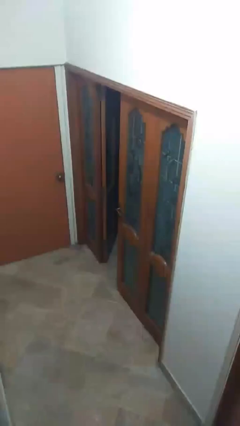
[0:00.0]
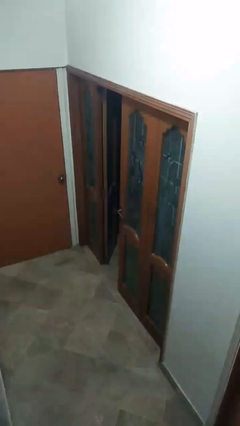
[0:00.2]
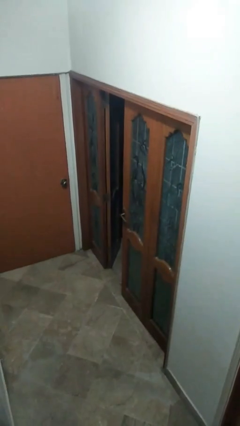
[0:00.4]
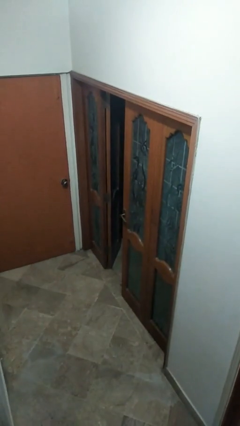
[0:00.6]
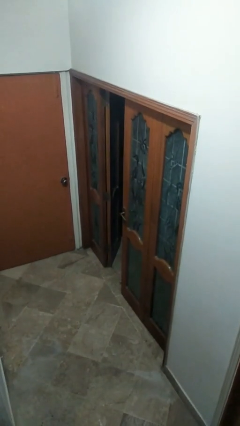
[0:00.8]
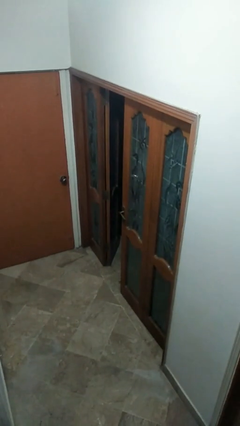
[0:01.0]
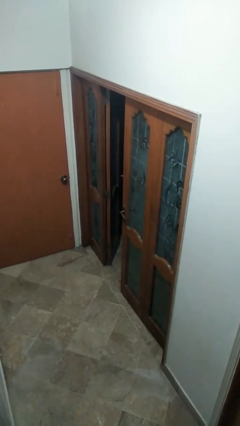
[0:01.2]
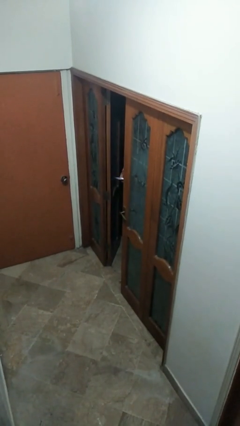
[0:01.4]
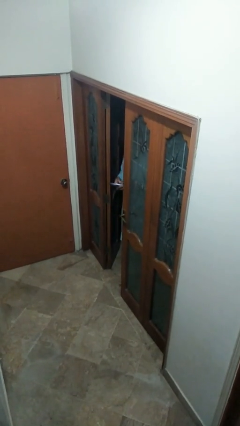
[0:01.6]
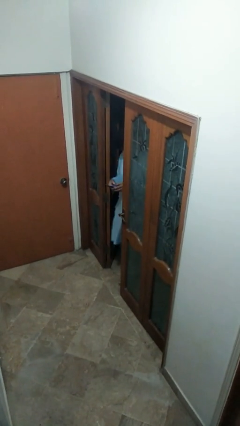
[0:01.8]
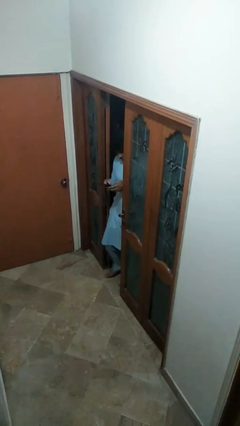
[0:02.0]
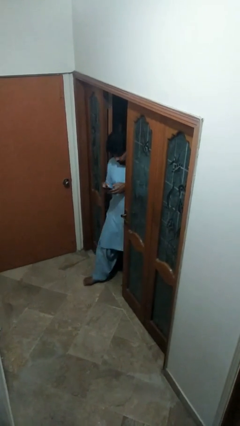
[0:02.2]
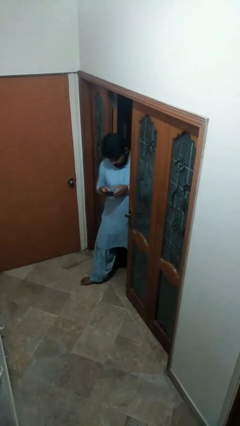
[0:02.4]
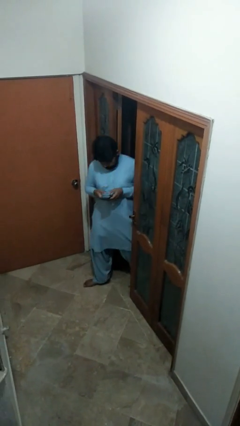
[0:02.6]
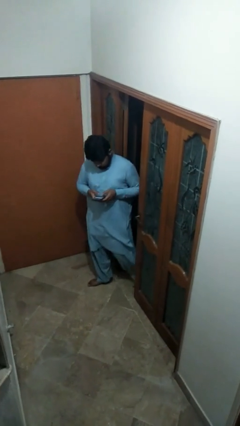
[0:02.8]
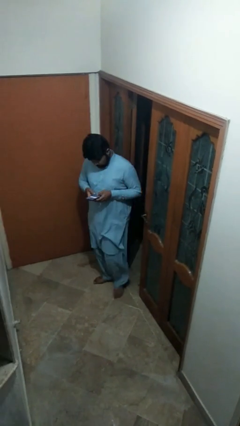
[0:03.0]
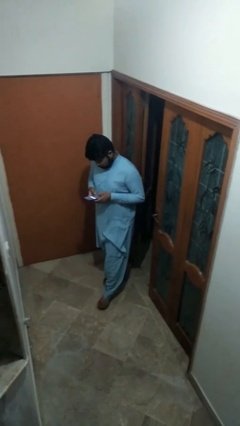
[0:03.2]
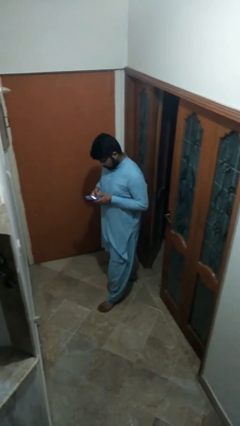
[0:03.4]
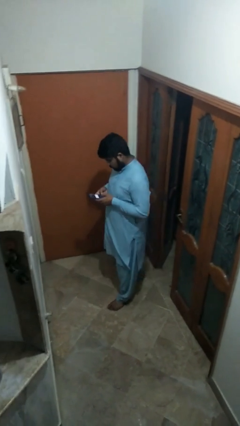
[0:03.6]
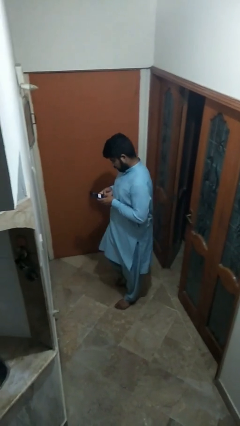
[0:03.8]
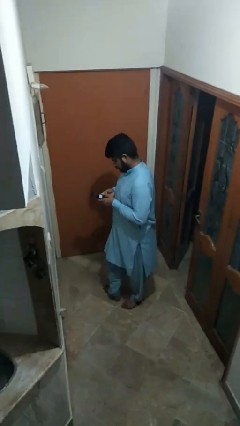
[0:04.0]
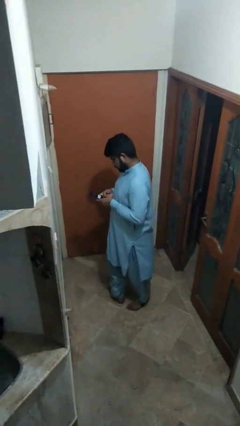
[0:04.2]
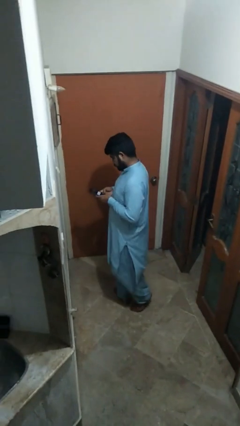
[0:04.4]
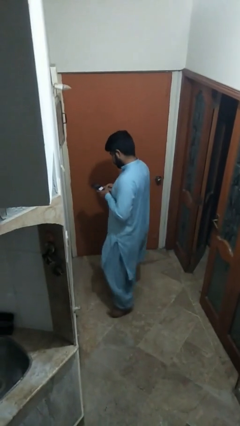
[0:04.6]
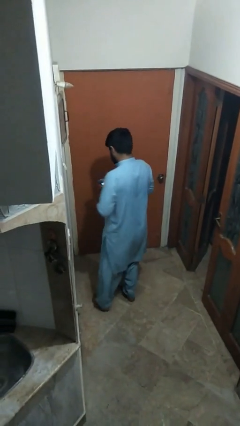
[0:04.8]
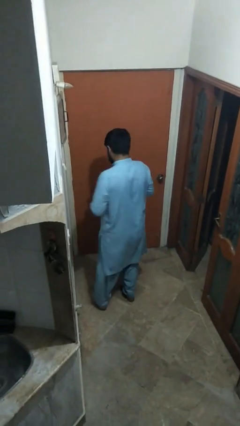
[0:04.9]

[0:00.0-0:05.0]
person enters scene through structure

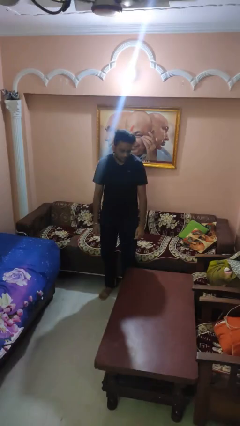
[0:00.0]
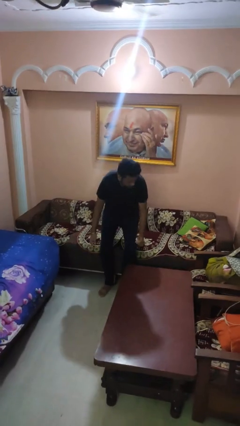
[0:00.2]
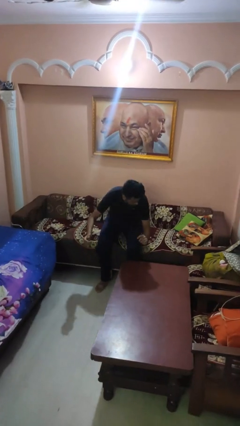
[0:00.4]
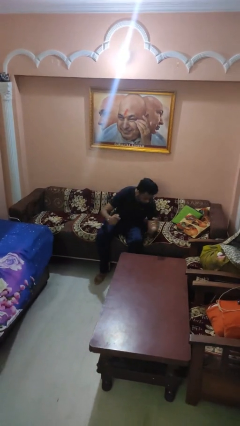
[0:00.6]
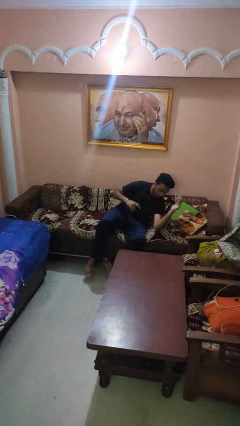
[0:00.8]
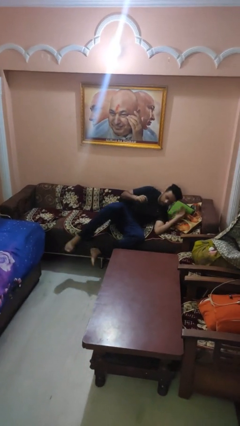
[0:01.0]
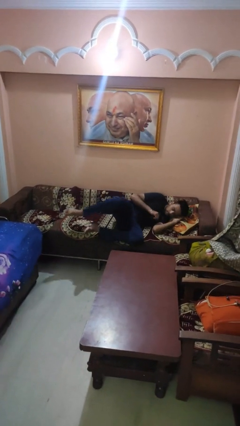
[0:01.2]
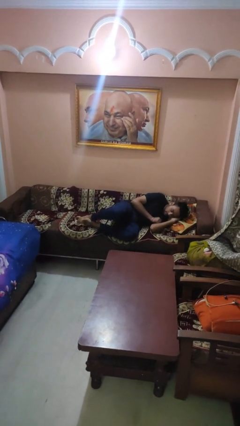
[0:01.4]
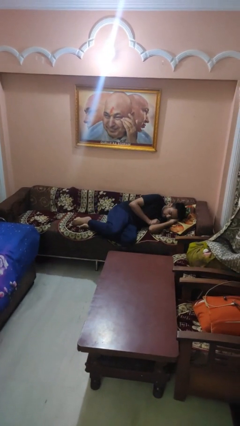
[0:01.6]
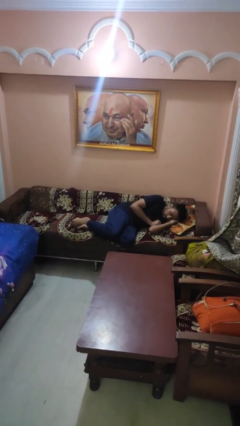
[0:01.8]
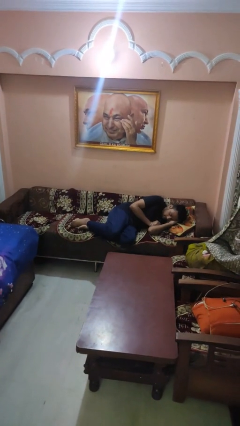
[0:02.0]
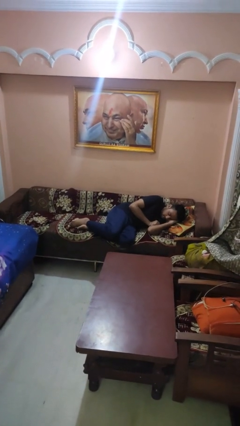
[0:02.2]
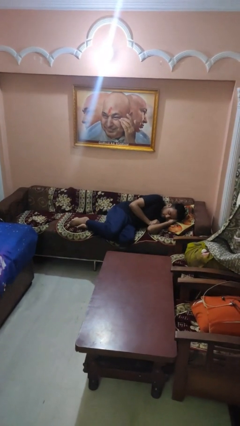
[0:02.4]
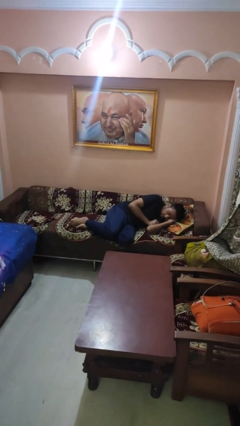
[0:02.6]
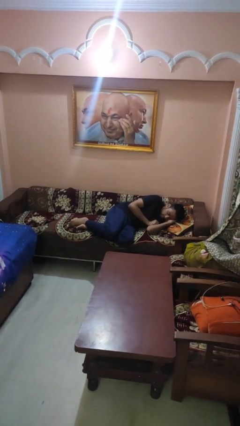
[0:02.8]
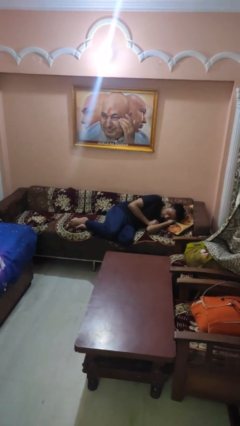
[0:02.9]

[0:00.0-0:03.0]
person lies down on couch

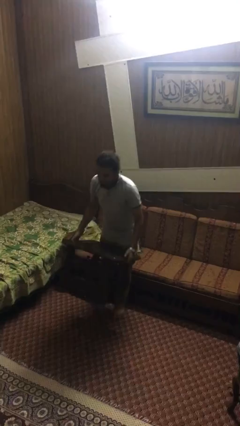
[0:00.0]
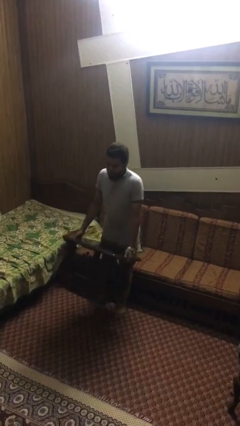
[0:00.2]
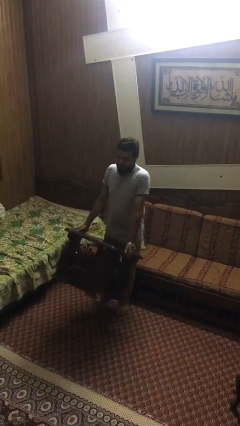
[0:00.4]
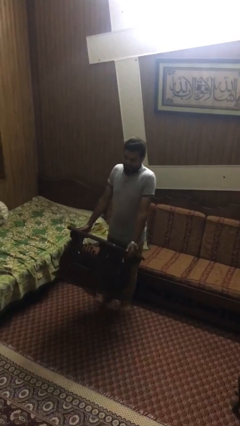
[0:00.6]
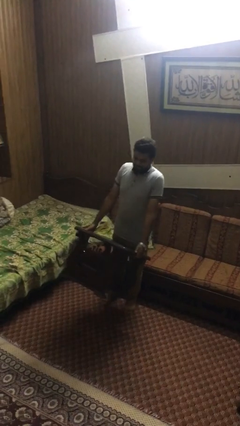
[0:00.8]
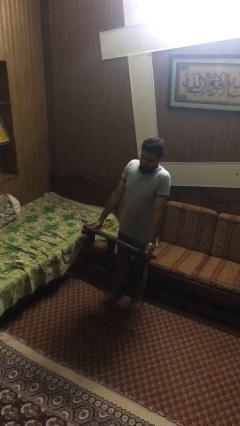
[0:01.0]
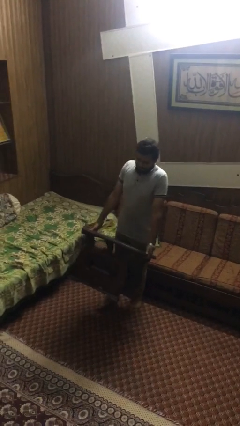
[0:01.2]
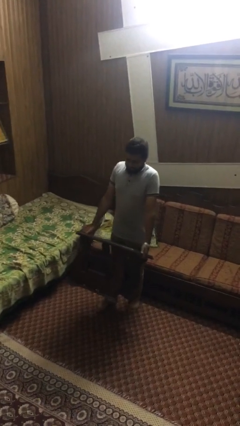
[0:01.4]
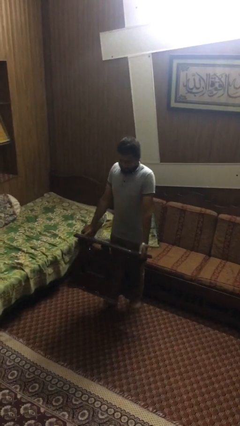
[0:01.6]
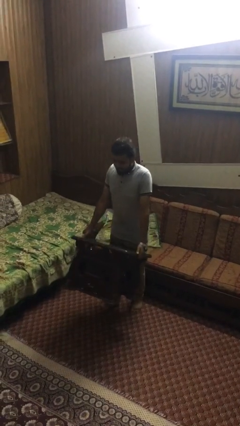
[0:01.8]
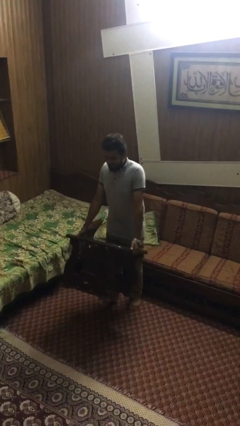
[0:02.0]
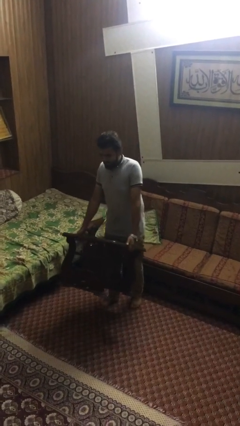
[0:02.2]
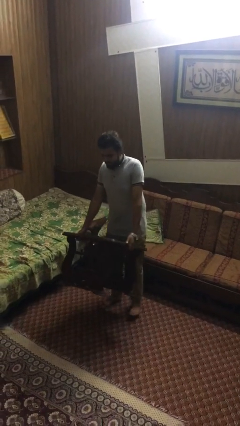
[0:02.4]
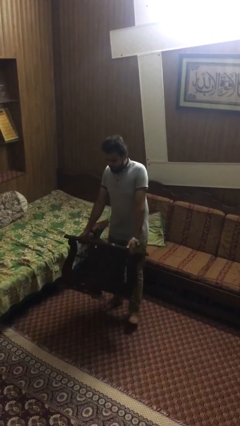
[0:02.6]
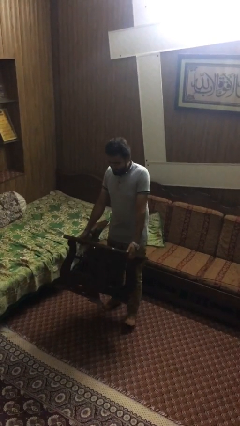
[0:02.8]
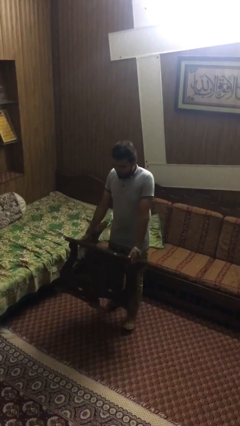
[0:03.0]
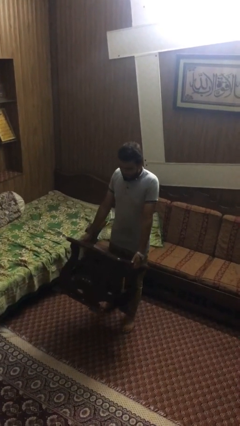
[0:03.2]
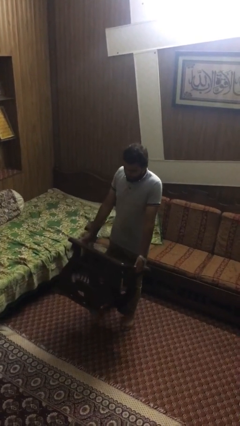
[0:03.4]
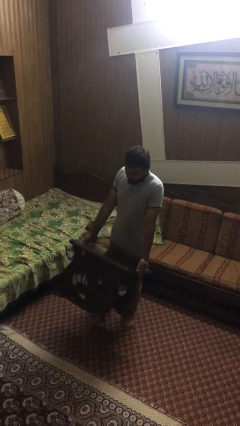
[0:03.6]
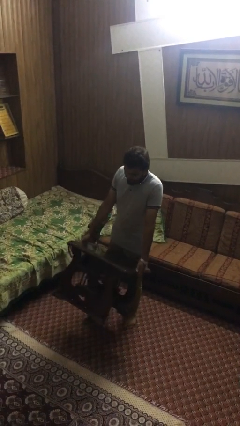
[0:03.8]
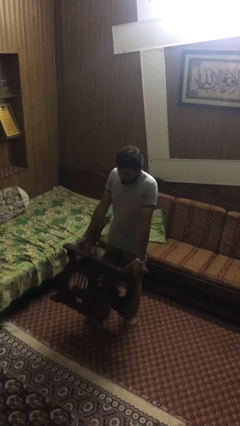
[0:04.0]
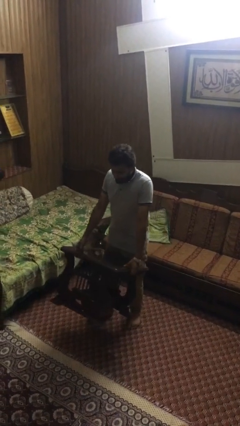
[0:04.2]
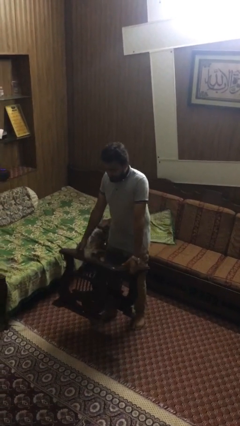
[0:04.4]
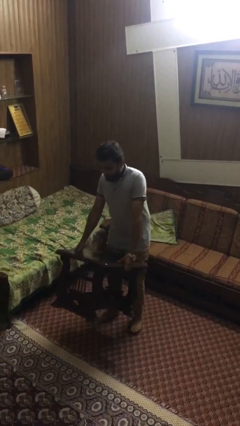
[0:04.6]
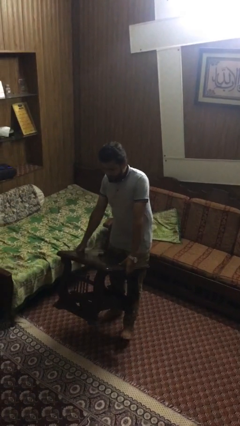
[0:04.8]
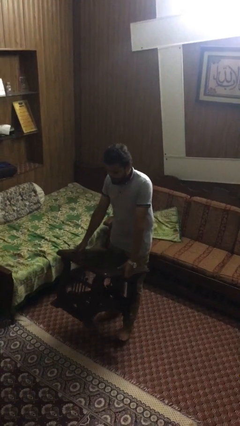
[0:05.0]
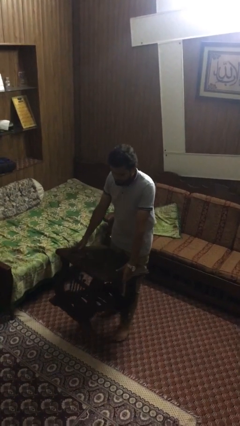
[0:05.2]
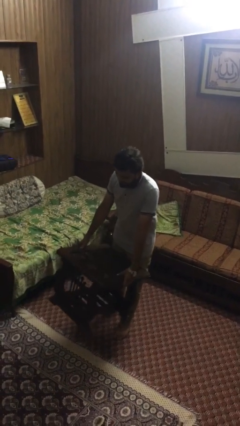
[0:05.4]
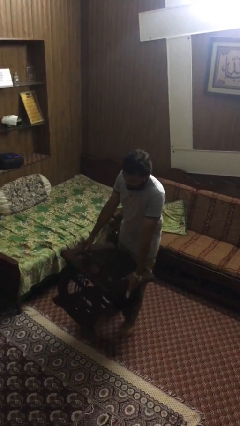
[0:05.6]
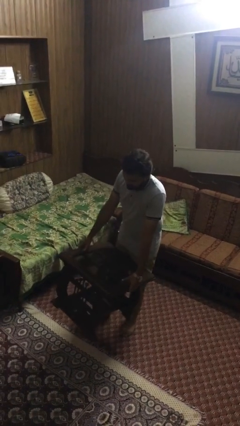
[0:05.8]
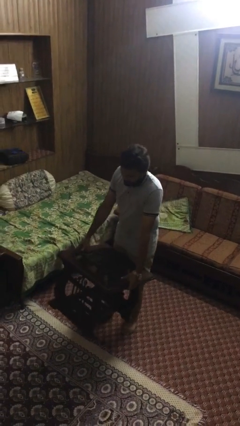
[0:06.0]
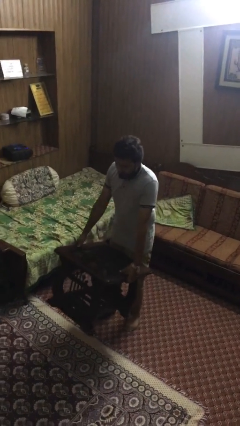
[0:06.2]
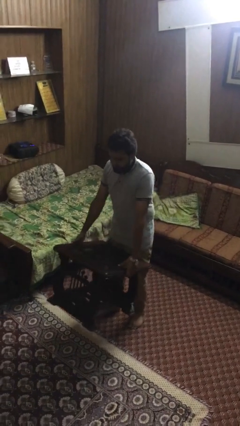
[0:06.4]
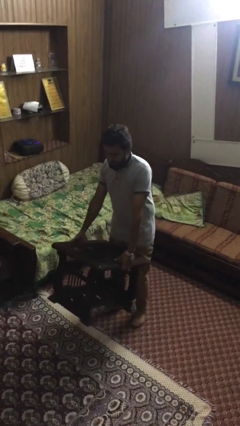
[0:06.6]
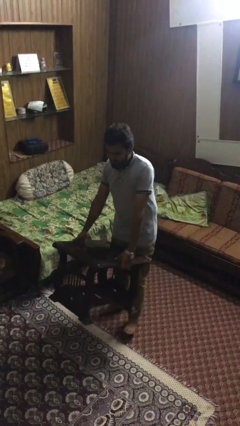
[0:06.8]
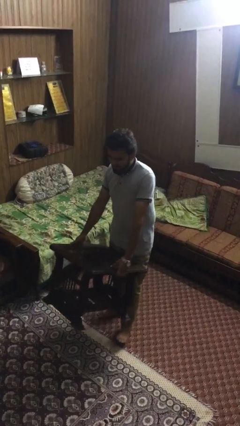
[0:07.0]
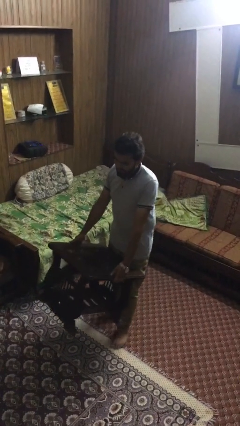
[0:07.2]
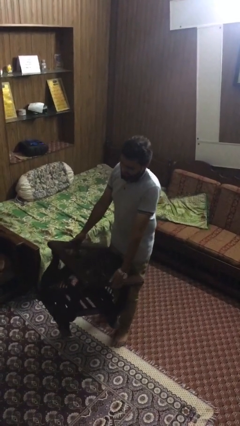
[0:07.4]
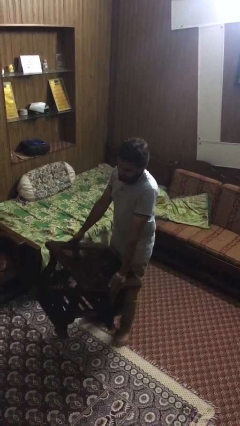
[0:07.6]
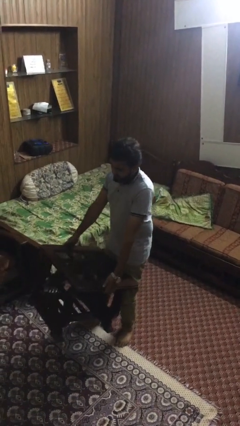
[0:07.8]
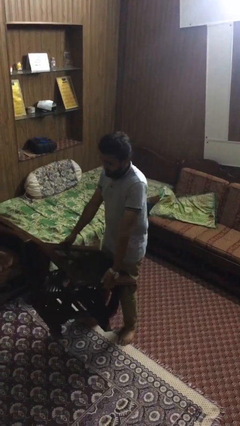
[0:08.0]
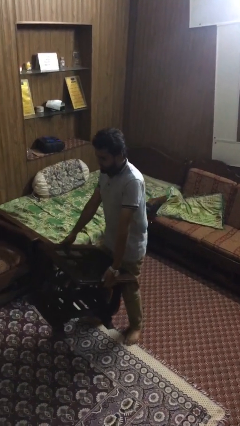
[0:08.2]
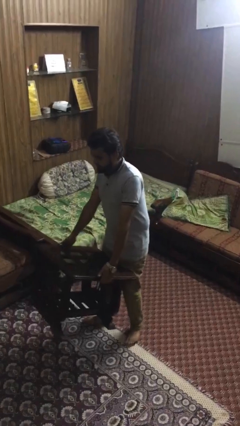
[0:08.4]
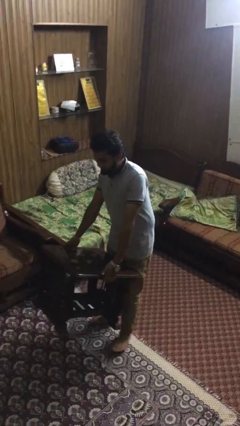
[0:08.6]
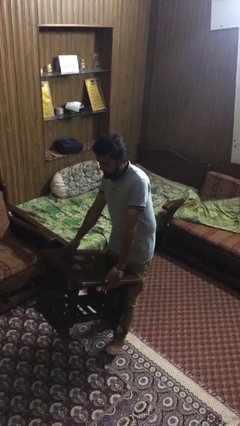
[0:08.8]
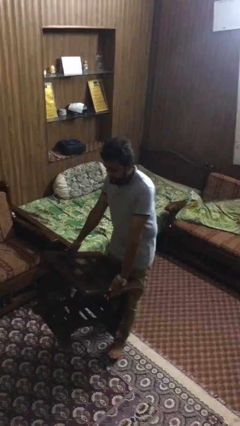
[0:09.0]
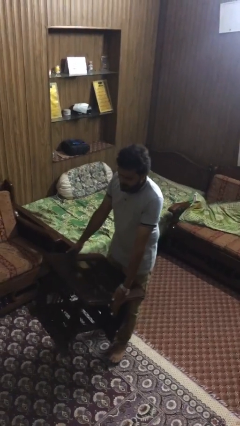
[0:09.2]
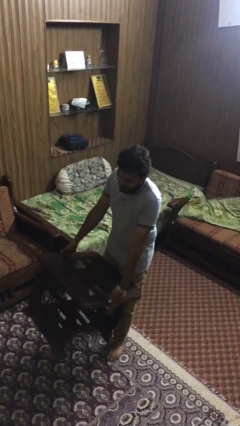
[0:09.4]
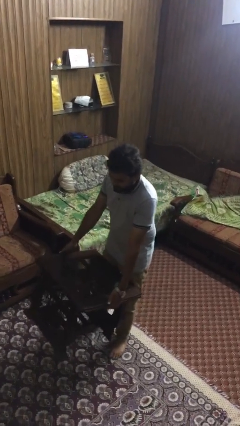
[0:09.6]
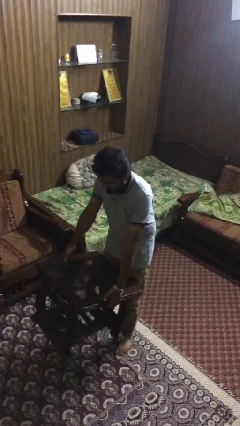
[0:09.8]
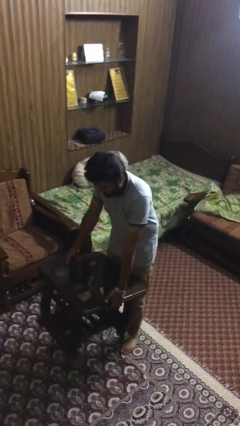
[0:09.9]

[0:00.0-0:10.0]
person carries heavy object
